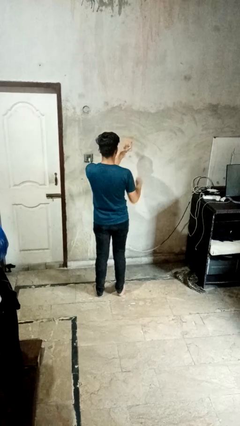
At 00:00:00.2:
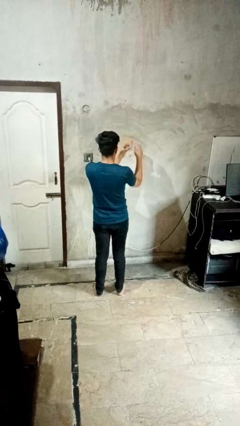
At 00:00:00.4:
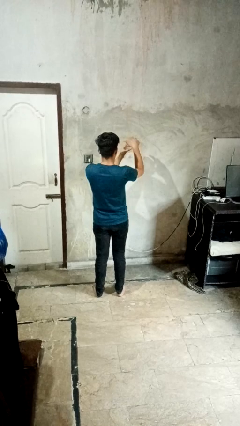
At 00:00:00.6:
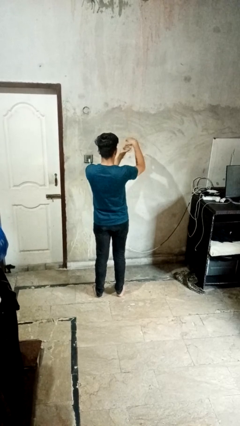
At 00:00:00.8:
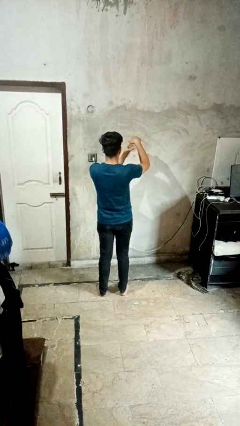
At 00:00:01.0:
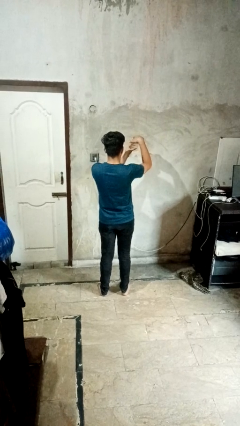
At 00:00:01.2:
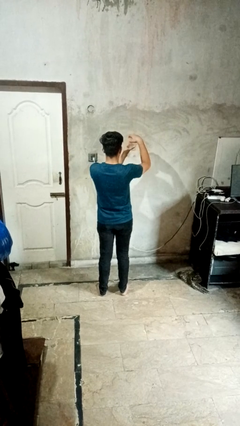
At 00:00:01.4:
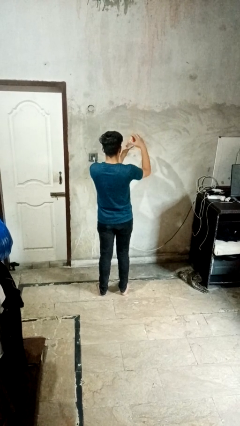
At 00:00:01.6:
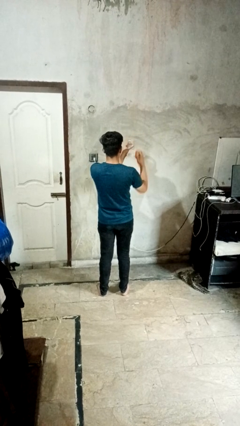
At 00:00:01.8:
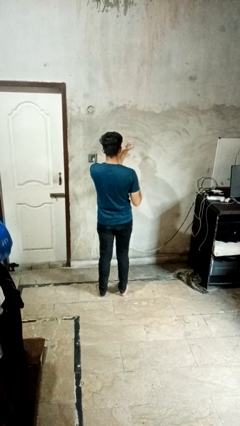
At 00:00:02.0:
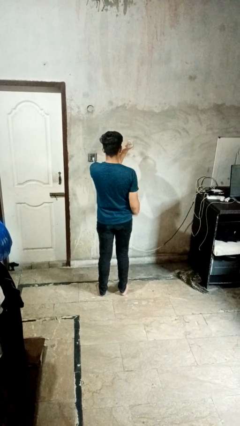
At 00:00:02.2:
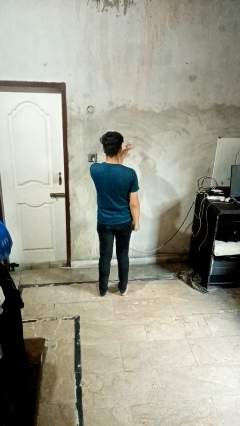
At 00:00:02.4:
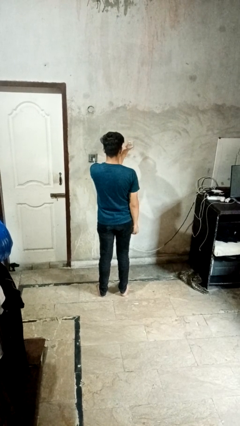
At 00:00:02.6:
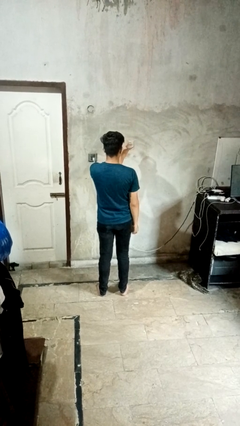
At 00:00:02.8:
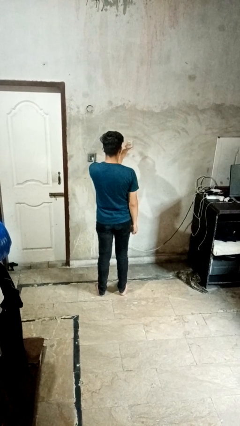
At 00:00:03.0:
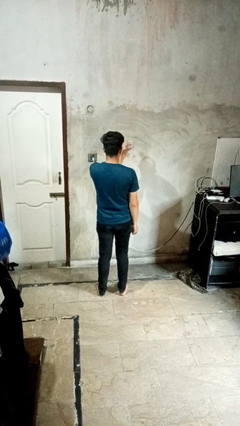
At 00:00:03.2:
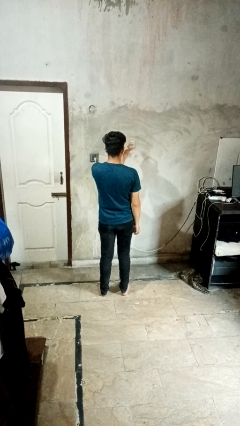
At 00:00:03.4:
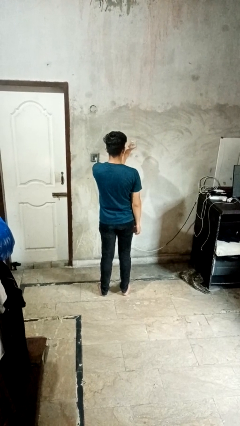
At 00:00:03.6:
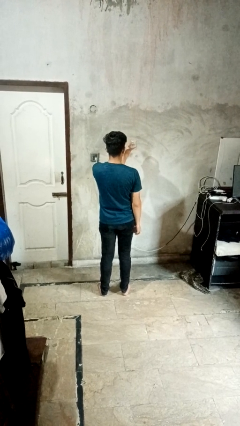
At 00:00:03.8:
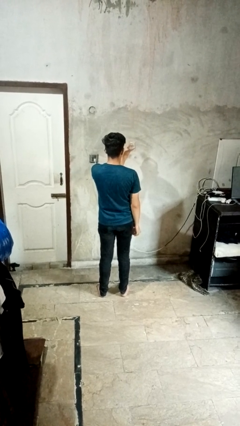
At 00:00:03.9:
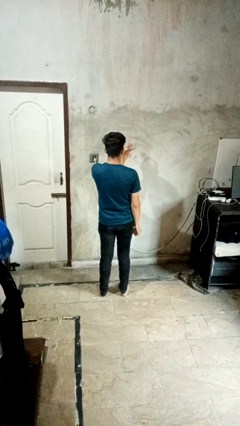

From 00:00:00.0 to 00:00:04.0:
person opens jar

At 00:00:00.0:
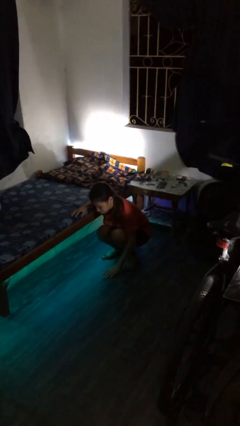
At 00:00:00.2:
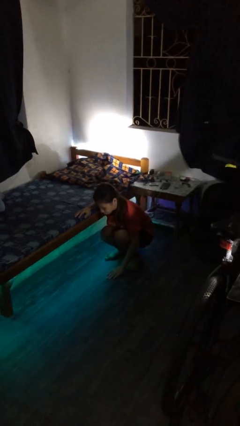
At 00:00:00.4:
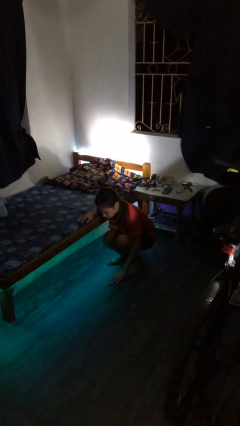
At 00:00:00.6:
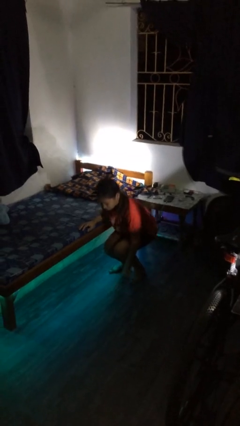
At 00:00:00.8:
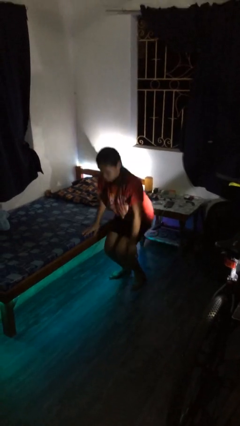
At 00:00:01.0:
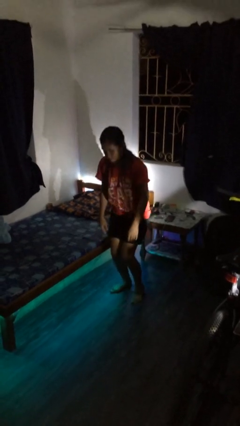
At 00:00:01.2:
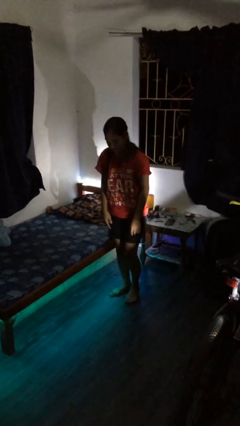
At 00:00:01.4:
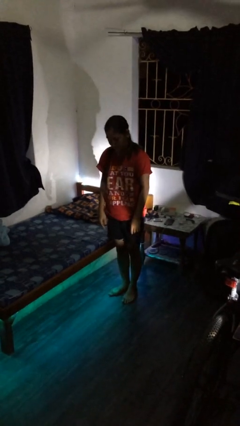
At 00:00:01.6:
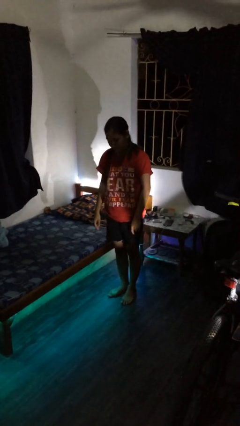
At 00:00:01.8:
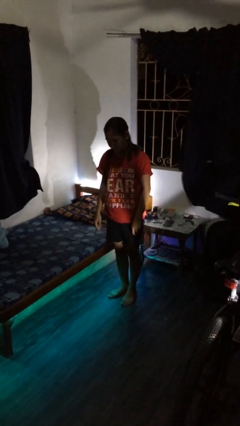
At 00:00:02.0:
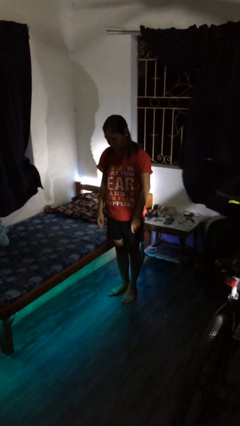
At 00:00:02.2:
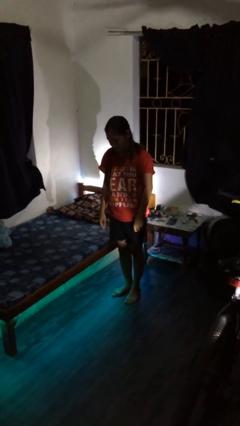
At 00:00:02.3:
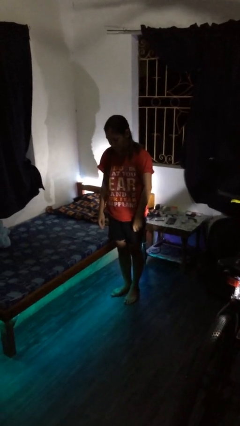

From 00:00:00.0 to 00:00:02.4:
person stands up from floor

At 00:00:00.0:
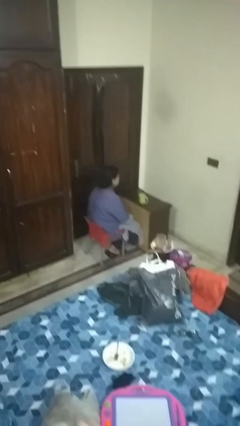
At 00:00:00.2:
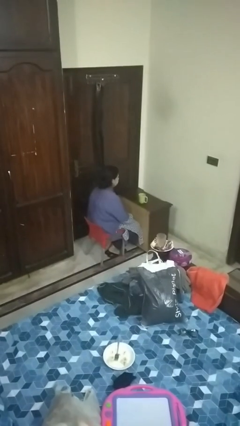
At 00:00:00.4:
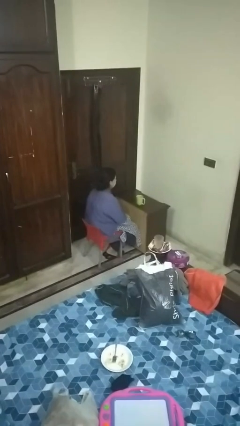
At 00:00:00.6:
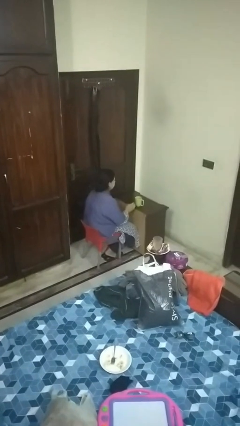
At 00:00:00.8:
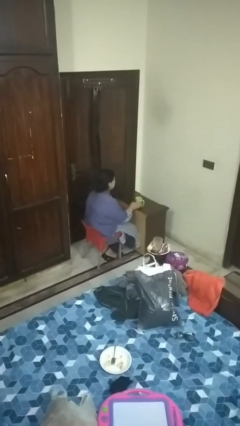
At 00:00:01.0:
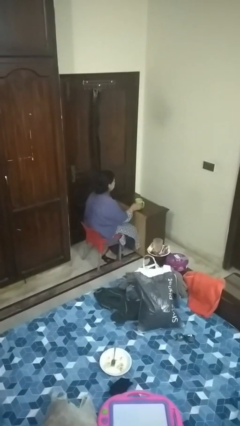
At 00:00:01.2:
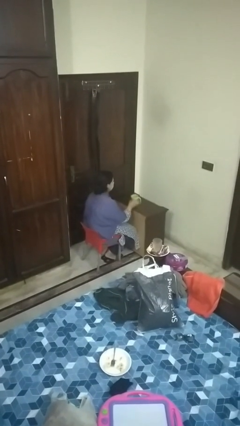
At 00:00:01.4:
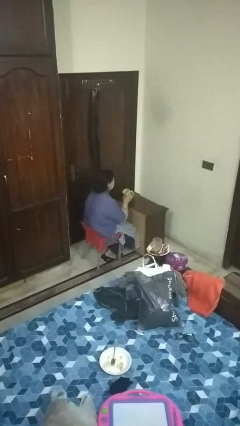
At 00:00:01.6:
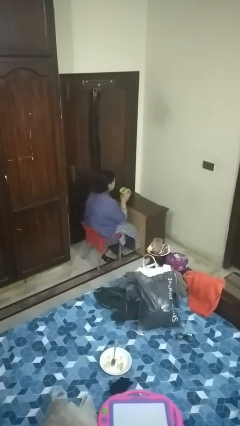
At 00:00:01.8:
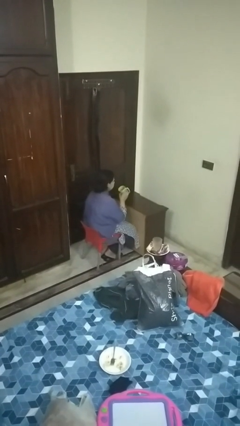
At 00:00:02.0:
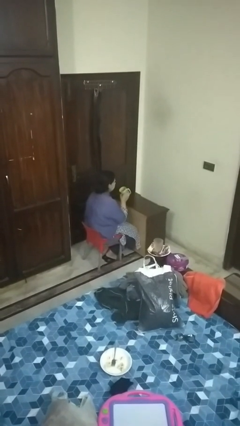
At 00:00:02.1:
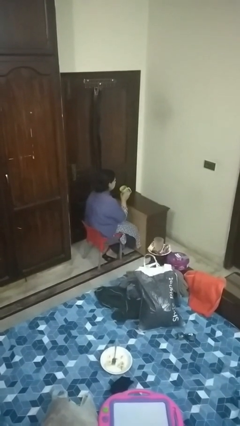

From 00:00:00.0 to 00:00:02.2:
person picks up object from table

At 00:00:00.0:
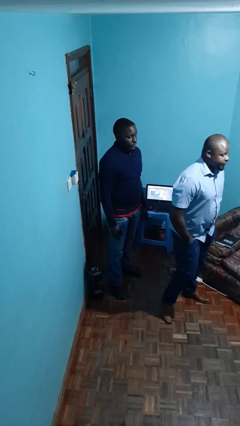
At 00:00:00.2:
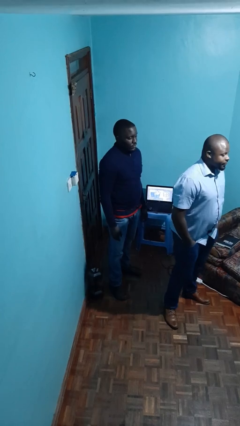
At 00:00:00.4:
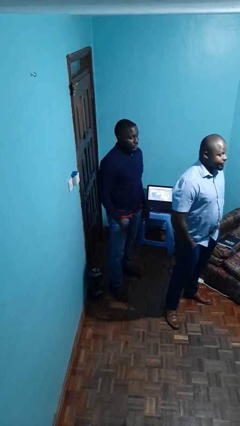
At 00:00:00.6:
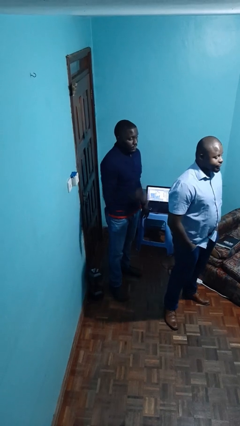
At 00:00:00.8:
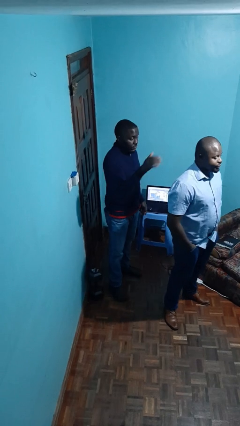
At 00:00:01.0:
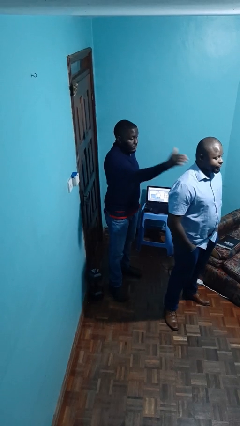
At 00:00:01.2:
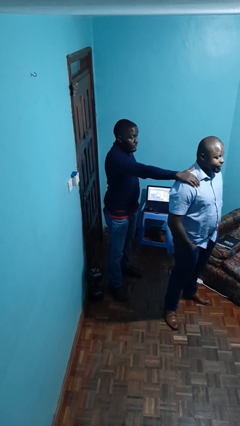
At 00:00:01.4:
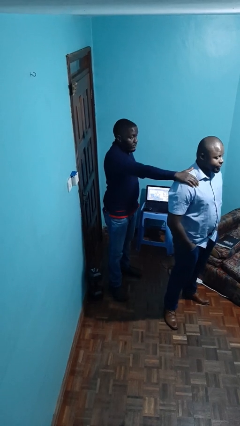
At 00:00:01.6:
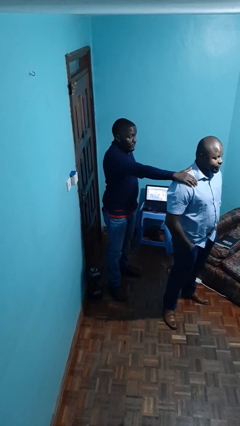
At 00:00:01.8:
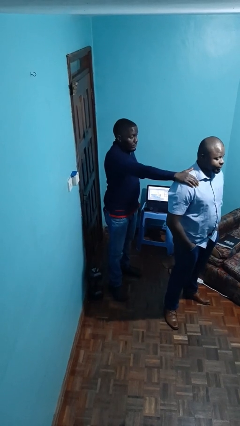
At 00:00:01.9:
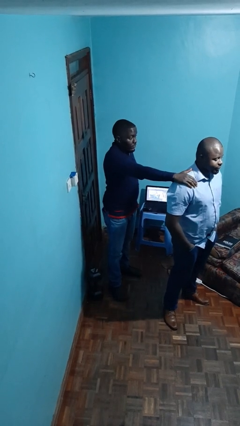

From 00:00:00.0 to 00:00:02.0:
person grabs person by shoulder

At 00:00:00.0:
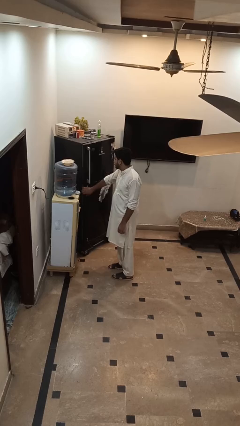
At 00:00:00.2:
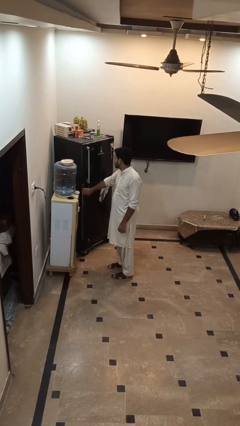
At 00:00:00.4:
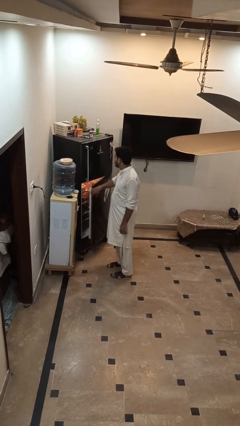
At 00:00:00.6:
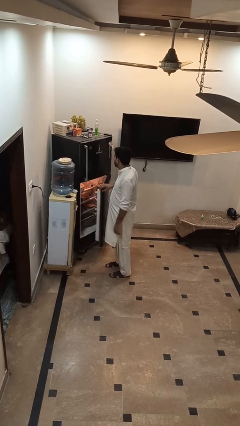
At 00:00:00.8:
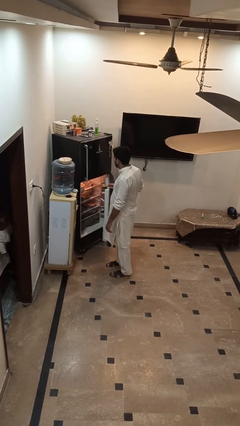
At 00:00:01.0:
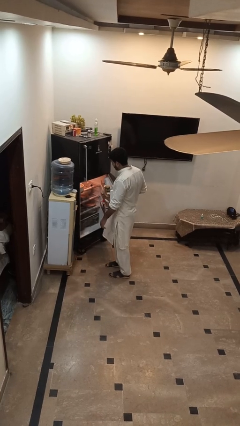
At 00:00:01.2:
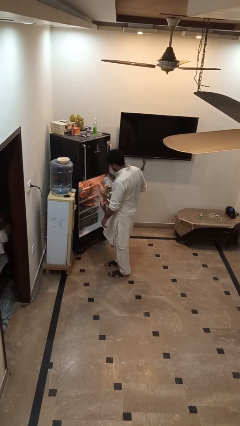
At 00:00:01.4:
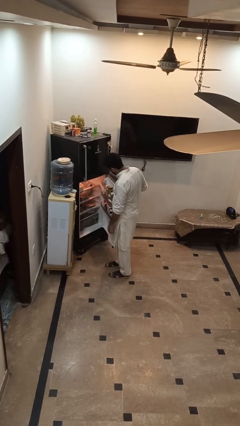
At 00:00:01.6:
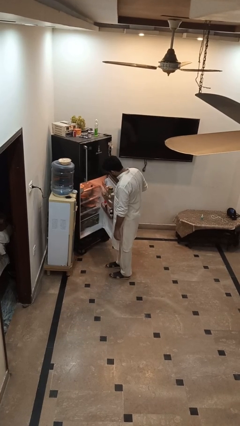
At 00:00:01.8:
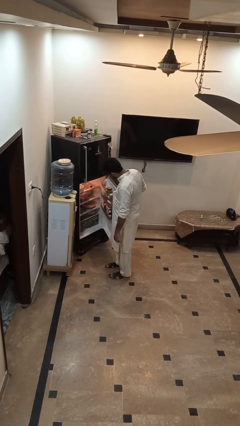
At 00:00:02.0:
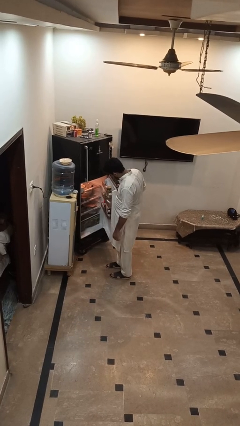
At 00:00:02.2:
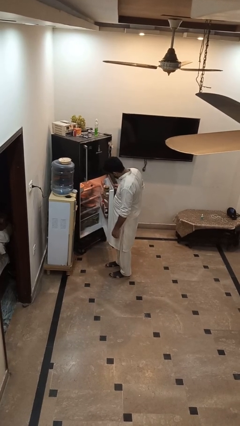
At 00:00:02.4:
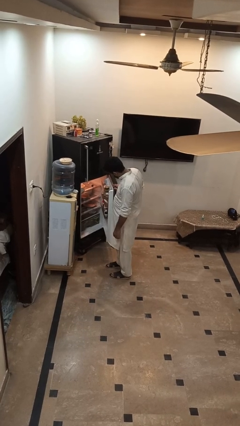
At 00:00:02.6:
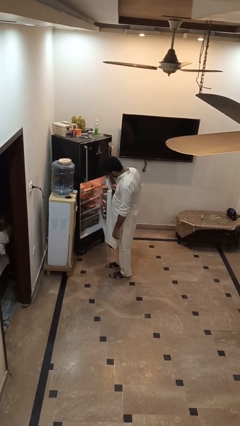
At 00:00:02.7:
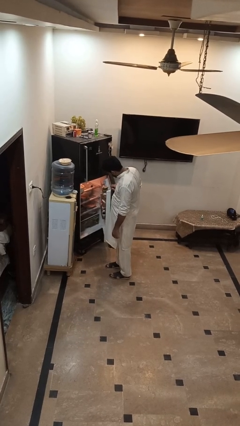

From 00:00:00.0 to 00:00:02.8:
person opens refrigerator

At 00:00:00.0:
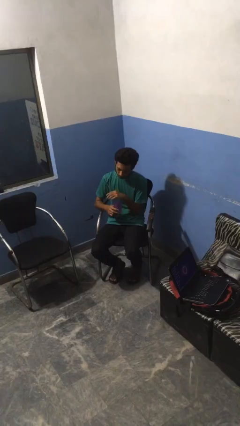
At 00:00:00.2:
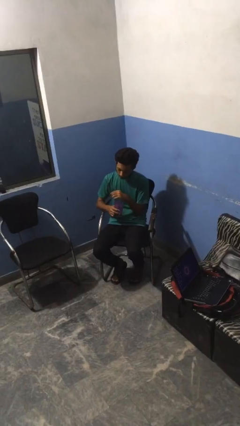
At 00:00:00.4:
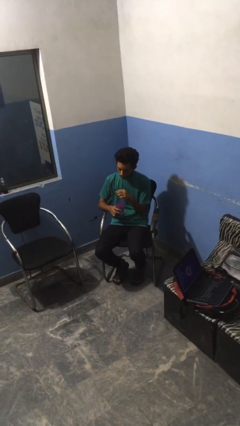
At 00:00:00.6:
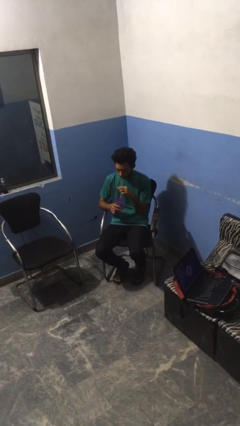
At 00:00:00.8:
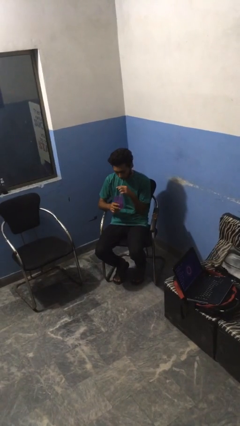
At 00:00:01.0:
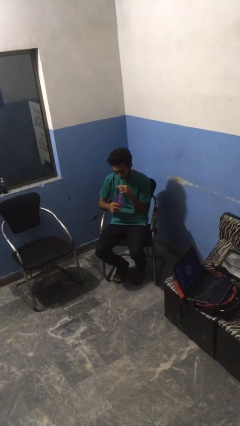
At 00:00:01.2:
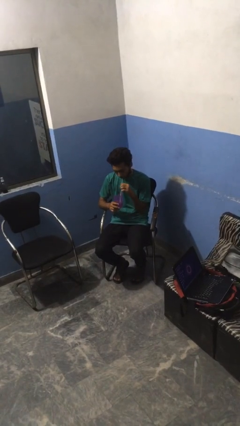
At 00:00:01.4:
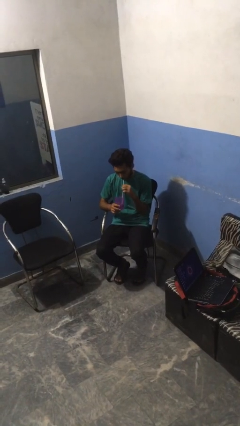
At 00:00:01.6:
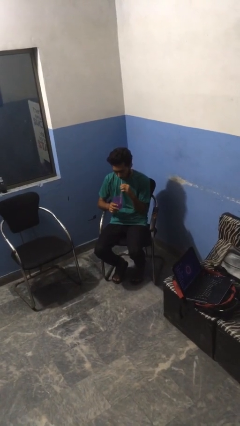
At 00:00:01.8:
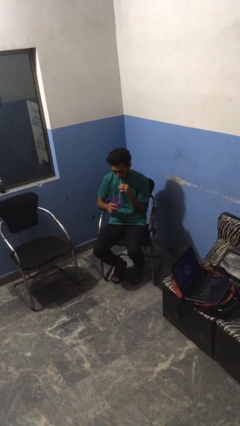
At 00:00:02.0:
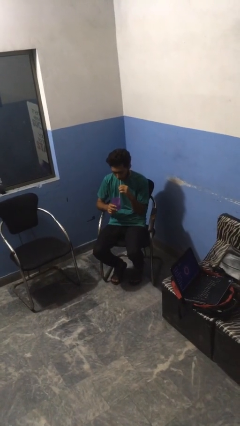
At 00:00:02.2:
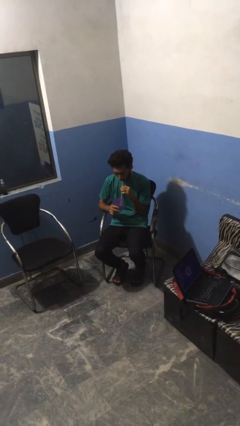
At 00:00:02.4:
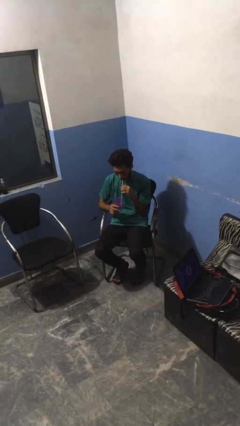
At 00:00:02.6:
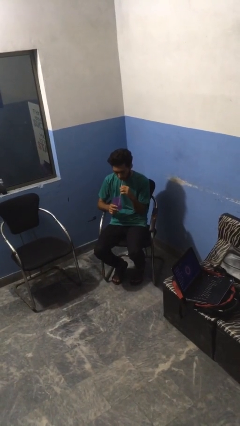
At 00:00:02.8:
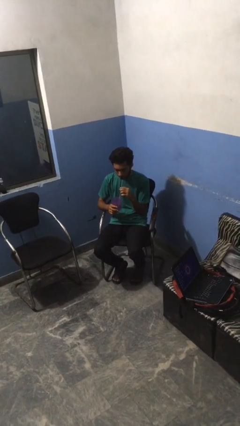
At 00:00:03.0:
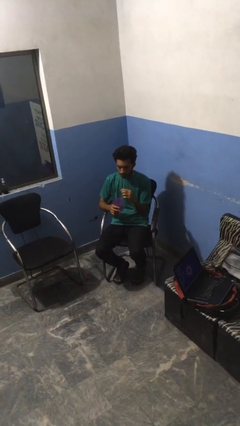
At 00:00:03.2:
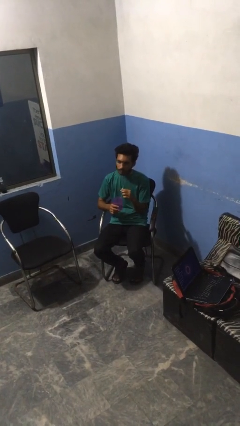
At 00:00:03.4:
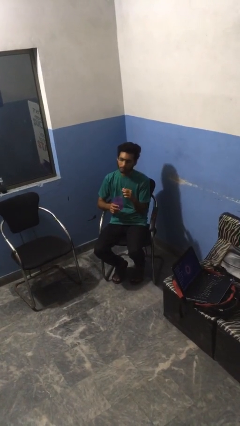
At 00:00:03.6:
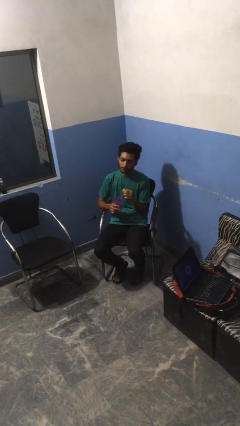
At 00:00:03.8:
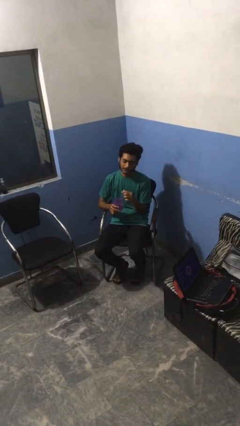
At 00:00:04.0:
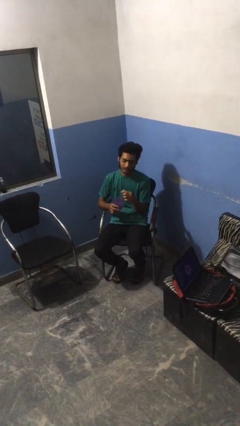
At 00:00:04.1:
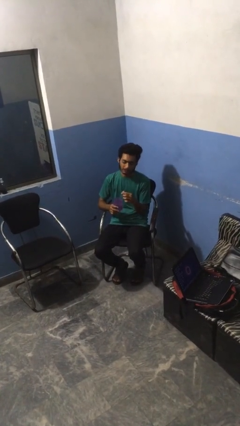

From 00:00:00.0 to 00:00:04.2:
person drinks from straw
